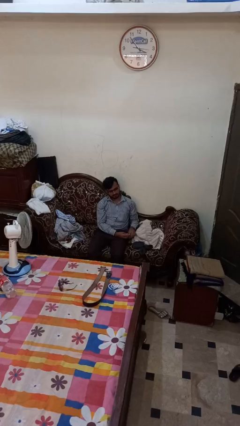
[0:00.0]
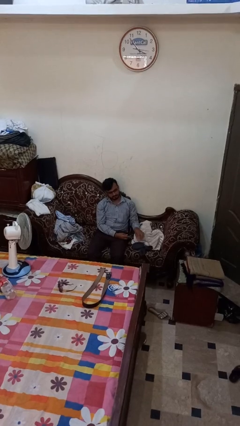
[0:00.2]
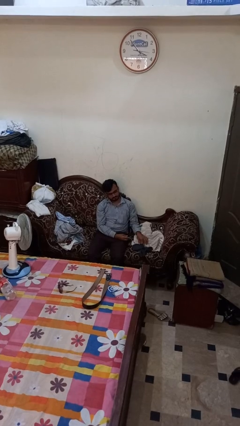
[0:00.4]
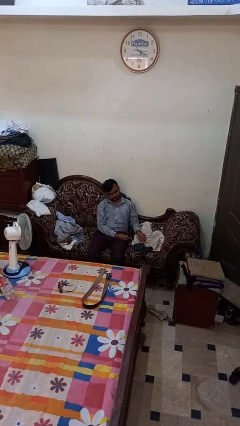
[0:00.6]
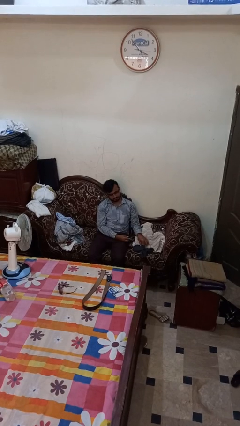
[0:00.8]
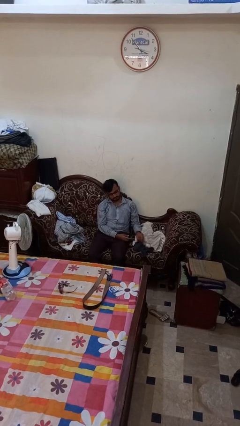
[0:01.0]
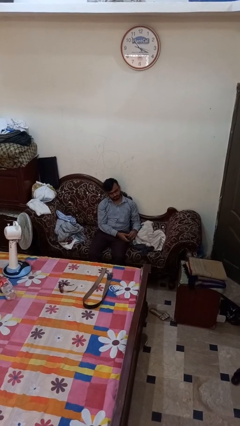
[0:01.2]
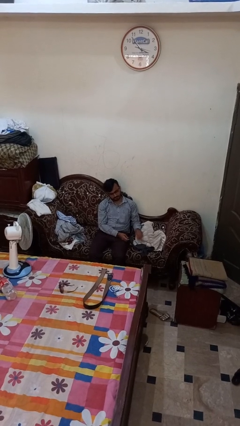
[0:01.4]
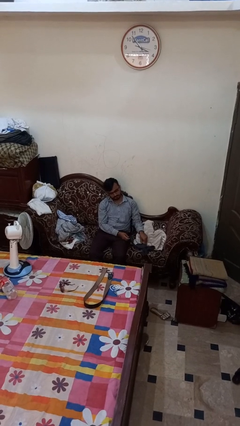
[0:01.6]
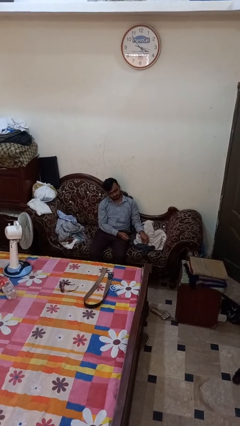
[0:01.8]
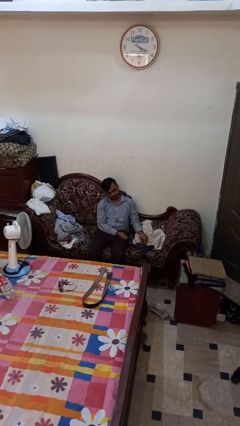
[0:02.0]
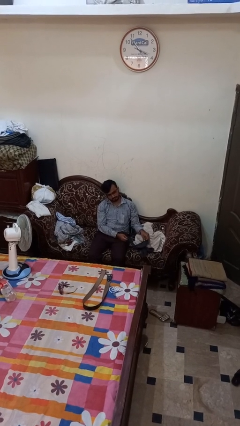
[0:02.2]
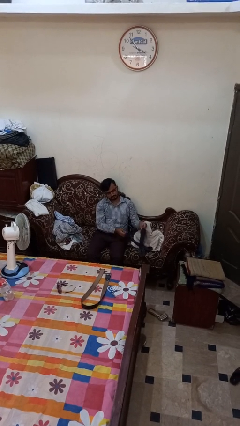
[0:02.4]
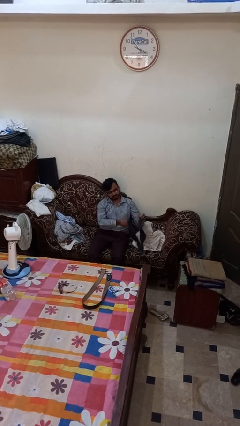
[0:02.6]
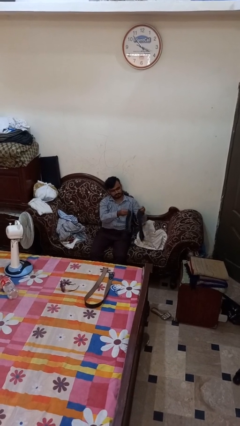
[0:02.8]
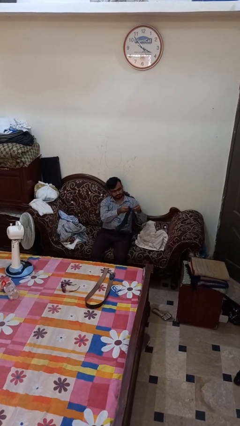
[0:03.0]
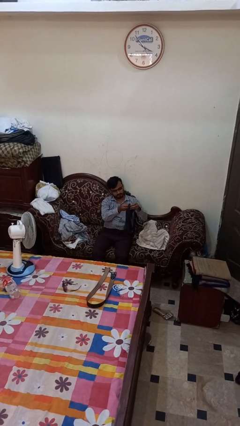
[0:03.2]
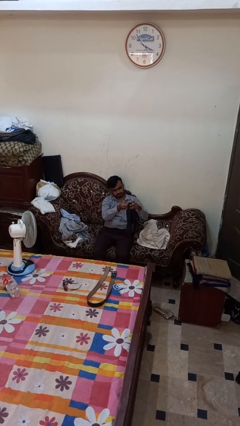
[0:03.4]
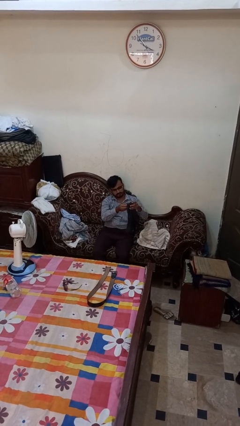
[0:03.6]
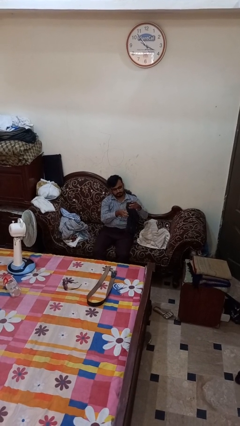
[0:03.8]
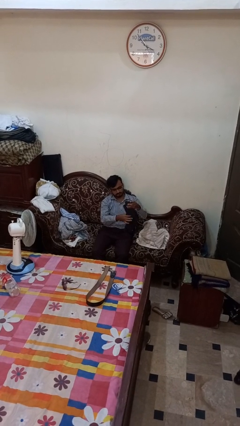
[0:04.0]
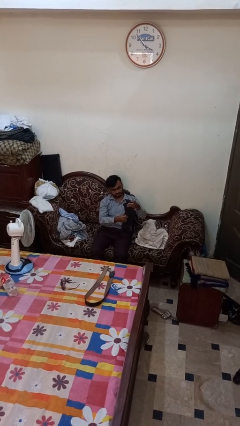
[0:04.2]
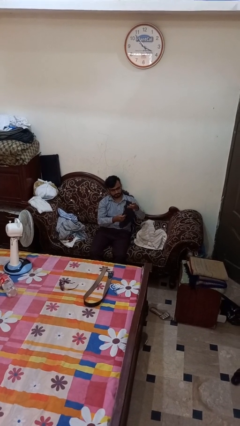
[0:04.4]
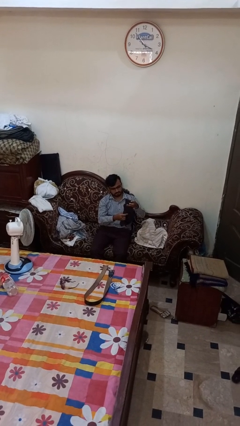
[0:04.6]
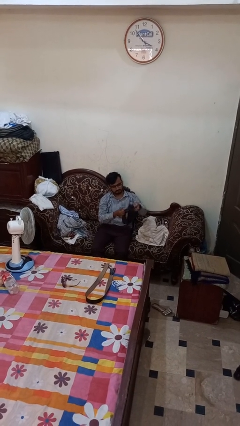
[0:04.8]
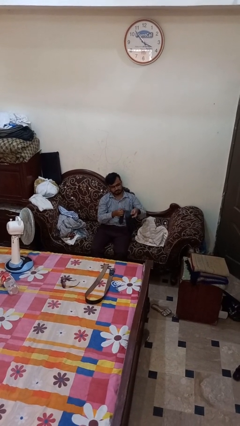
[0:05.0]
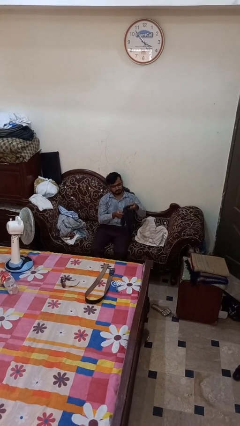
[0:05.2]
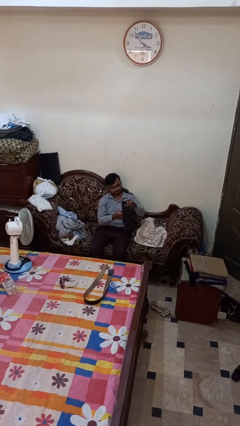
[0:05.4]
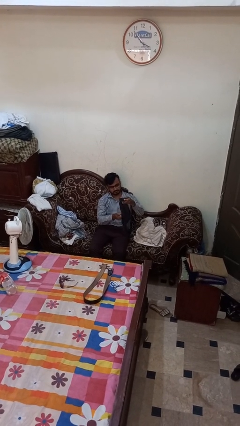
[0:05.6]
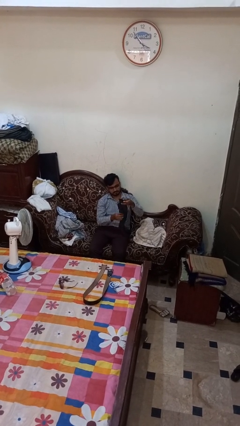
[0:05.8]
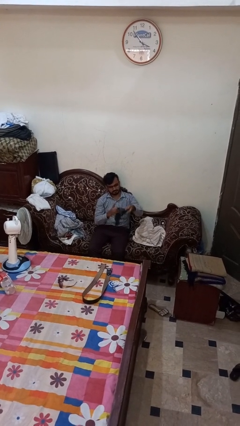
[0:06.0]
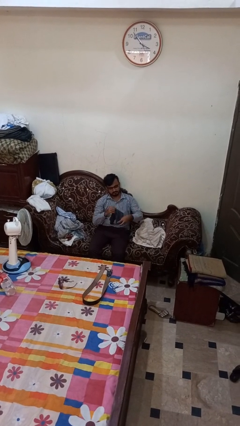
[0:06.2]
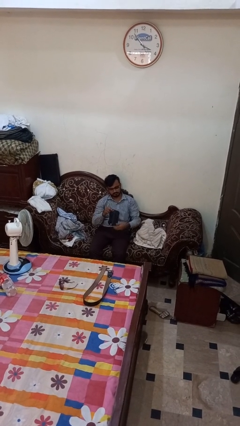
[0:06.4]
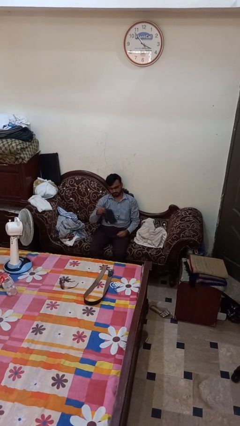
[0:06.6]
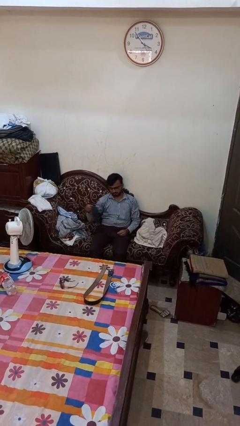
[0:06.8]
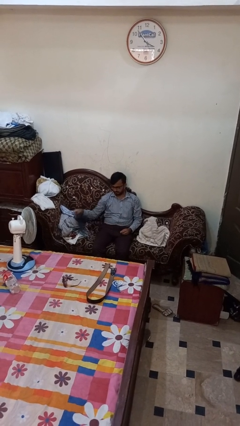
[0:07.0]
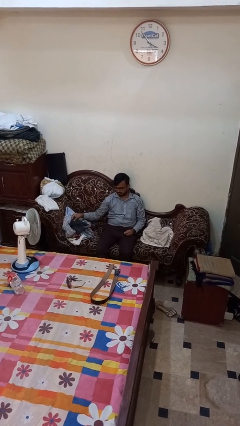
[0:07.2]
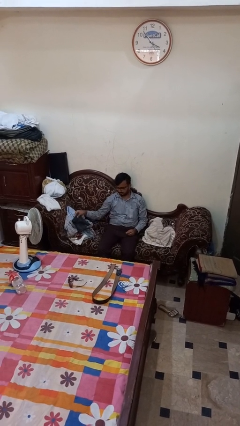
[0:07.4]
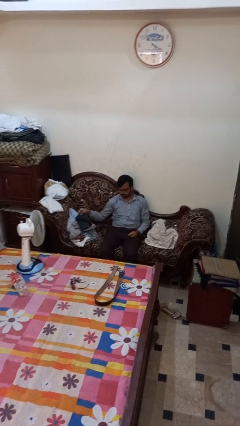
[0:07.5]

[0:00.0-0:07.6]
person folds socks

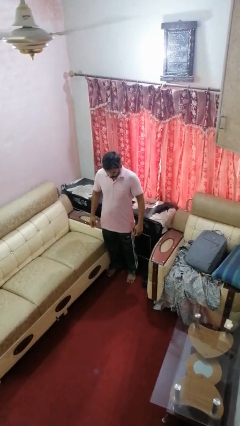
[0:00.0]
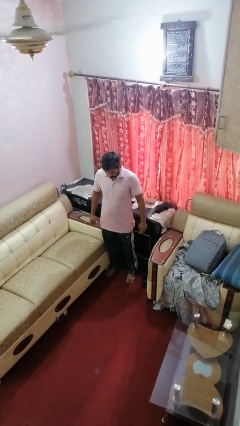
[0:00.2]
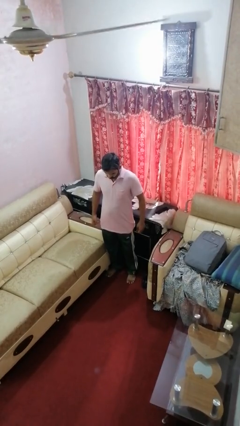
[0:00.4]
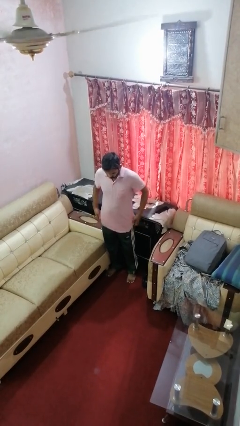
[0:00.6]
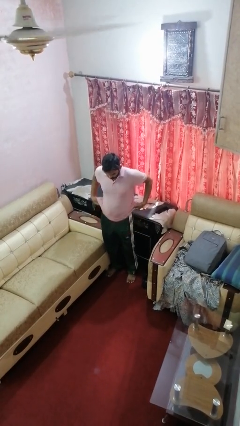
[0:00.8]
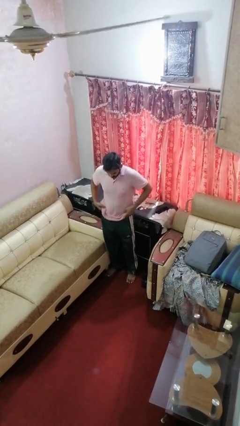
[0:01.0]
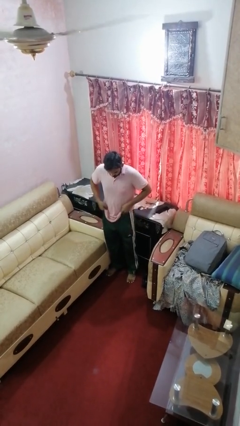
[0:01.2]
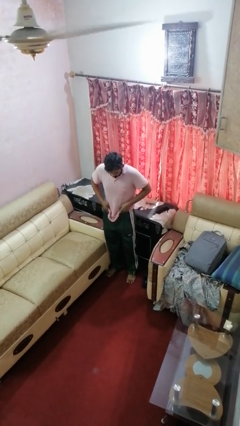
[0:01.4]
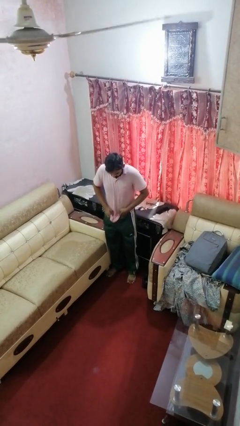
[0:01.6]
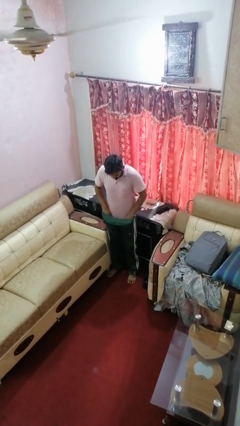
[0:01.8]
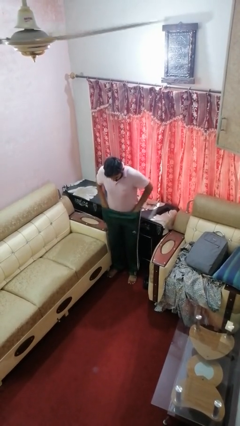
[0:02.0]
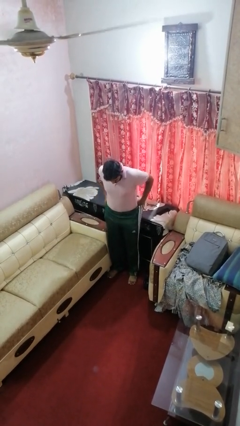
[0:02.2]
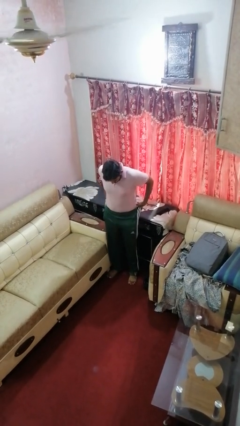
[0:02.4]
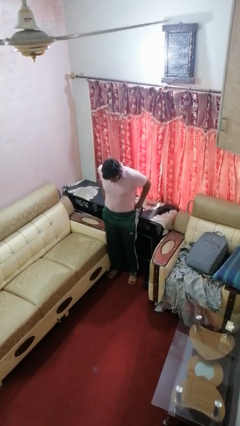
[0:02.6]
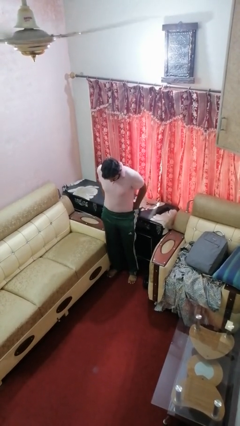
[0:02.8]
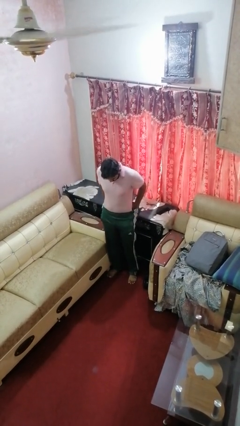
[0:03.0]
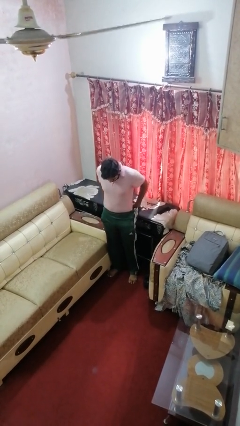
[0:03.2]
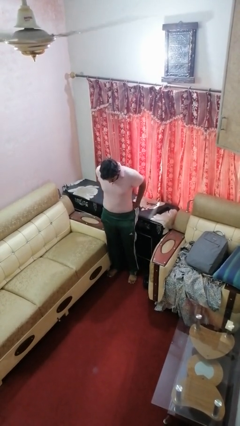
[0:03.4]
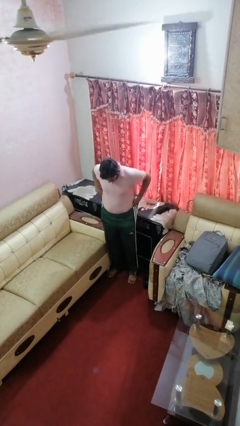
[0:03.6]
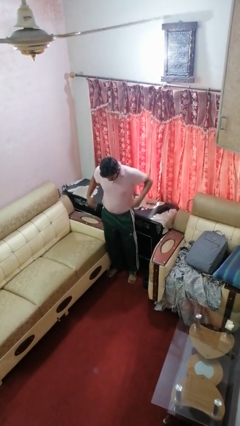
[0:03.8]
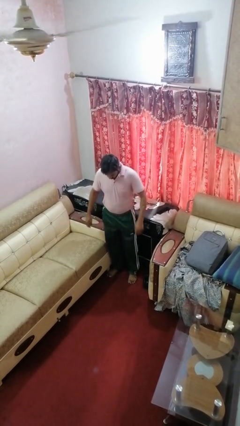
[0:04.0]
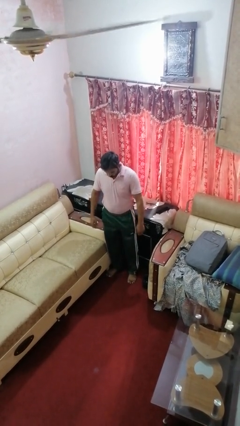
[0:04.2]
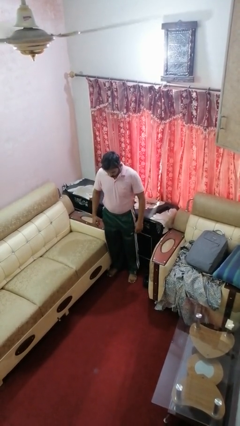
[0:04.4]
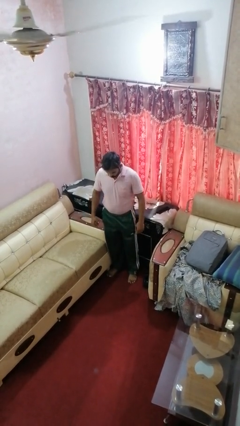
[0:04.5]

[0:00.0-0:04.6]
person tucks in shirt

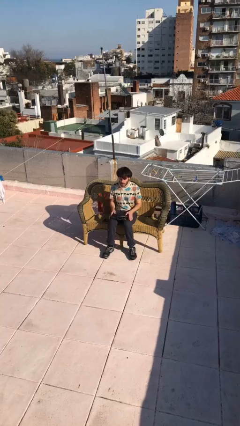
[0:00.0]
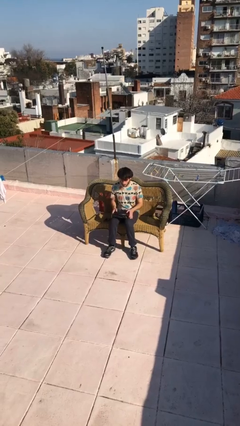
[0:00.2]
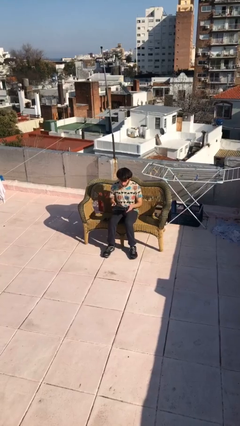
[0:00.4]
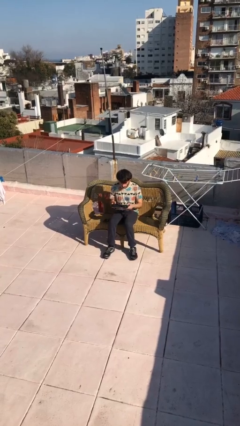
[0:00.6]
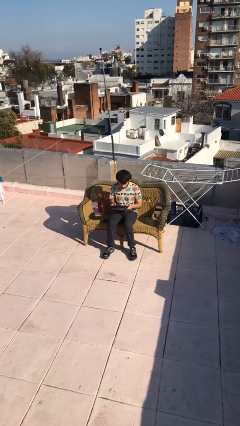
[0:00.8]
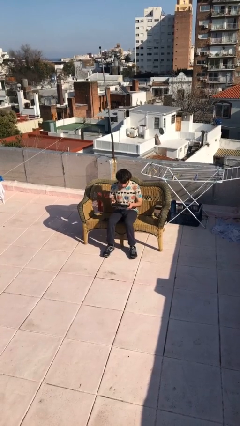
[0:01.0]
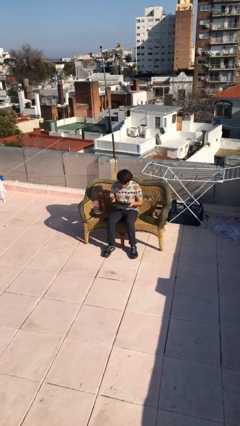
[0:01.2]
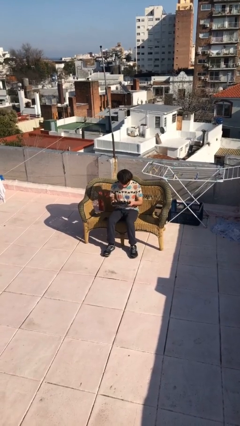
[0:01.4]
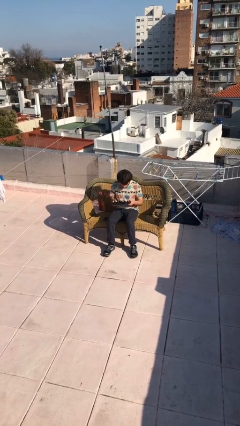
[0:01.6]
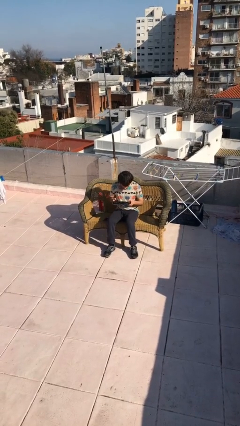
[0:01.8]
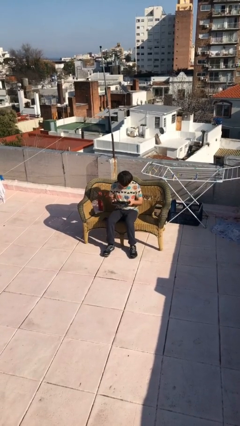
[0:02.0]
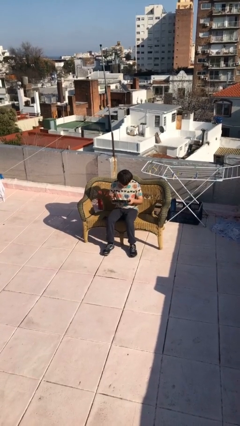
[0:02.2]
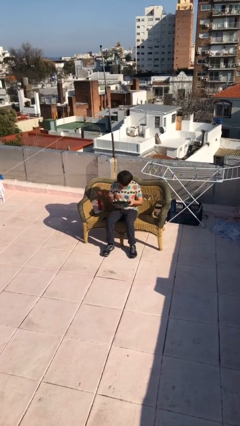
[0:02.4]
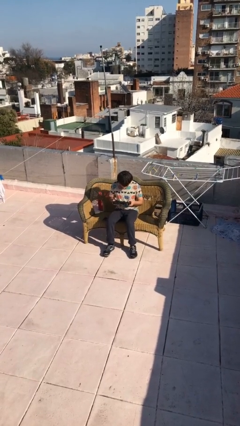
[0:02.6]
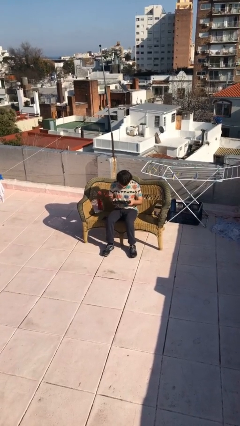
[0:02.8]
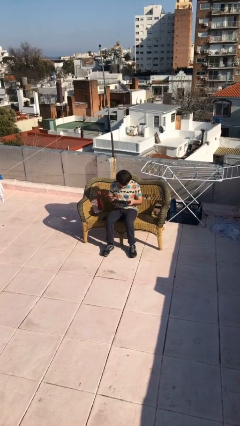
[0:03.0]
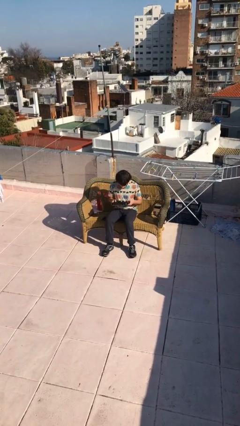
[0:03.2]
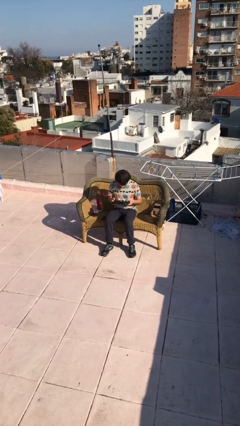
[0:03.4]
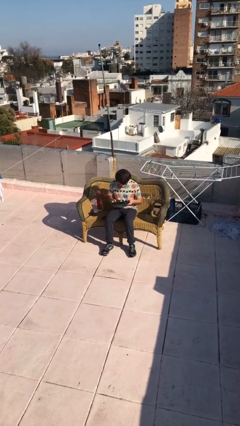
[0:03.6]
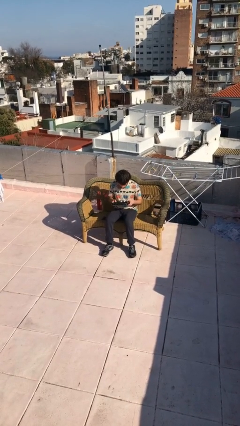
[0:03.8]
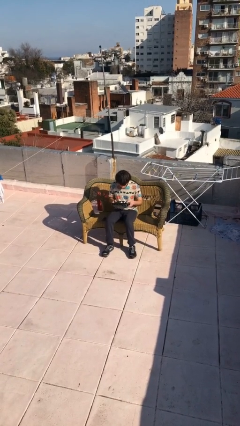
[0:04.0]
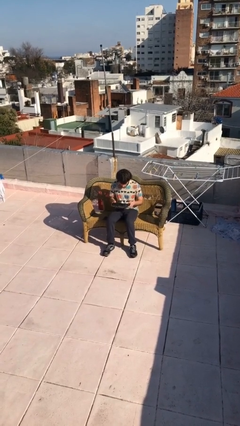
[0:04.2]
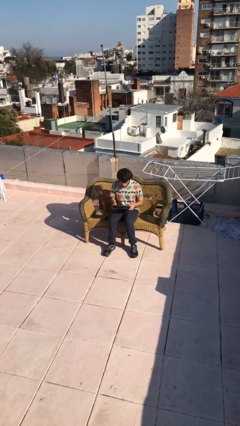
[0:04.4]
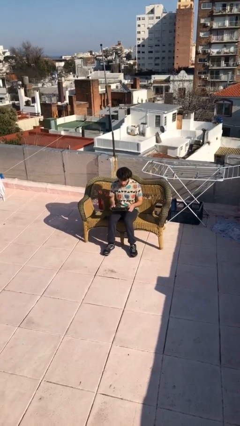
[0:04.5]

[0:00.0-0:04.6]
person interacts with handheld game

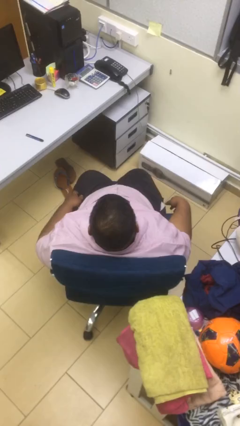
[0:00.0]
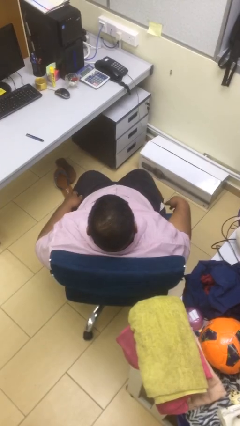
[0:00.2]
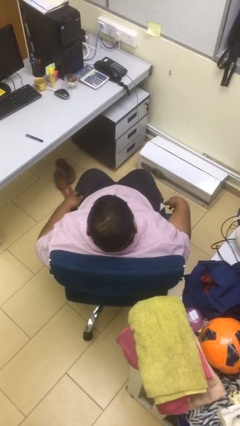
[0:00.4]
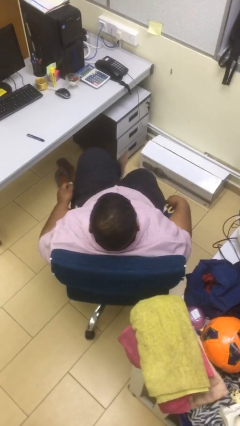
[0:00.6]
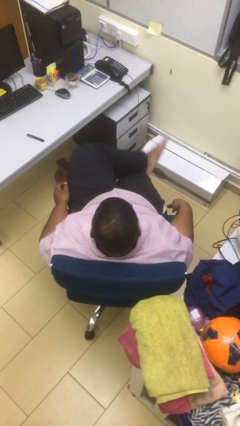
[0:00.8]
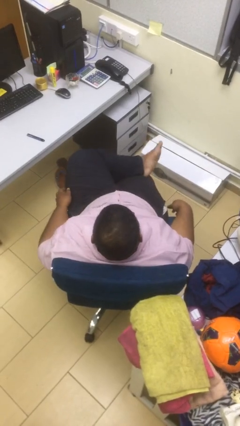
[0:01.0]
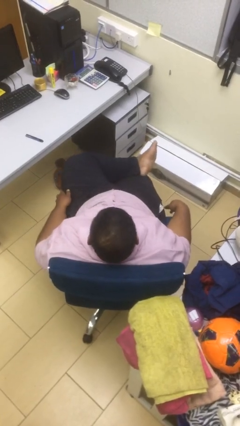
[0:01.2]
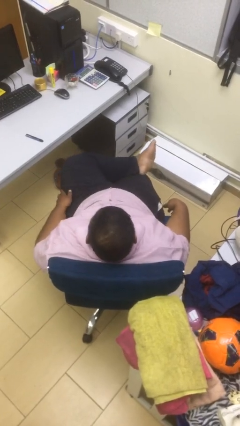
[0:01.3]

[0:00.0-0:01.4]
person crosses legs
